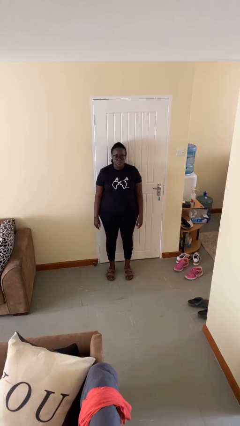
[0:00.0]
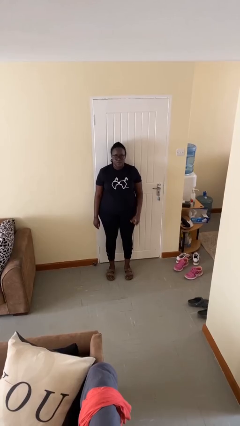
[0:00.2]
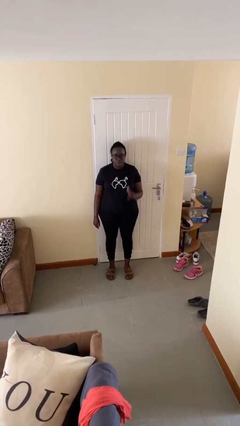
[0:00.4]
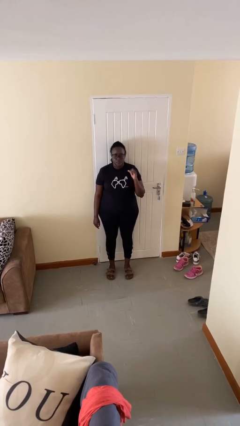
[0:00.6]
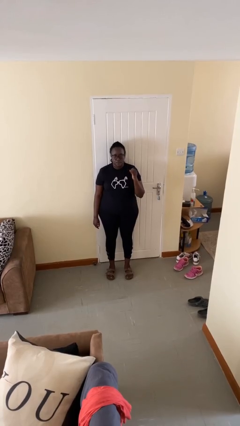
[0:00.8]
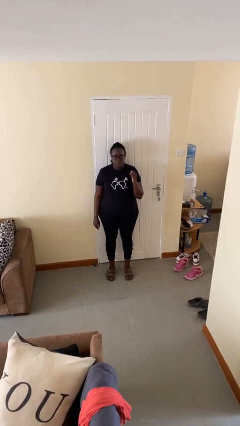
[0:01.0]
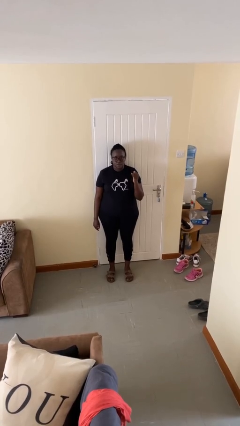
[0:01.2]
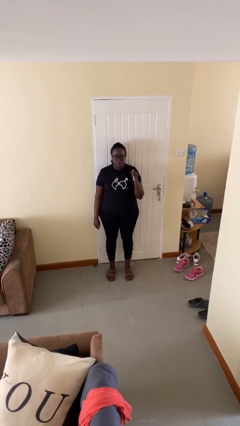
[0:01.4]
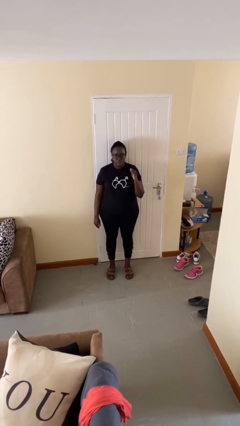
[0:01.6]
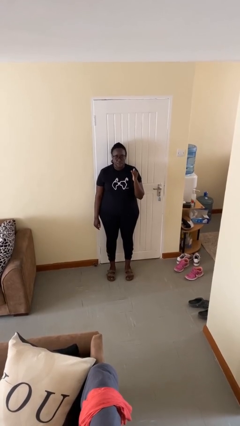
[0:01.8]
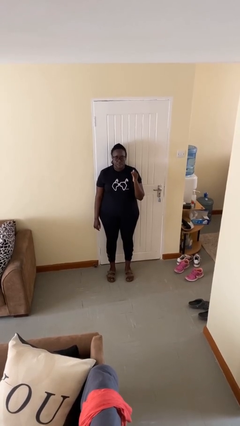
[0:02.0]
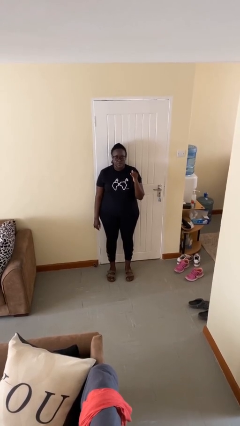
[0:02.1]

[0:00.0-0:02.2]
person gestures hang loose

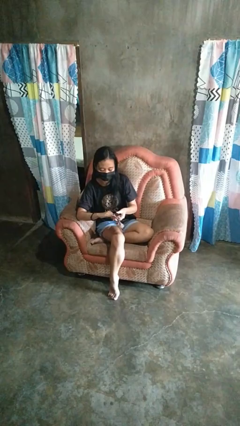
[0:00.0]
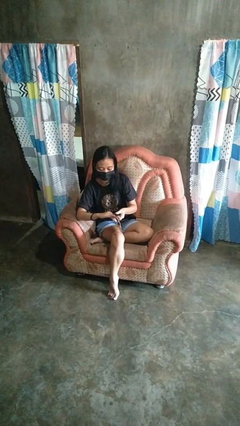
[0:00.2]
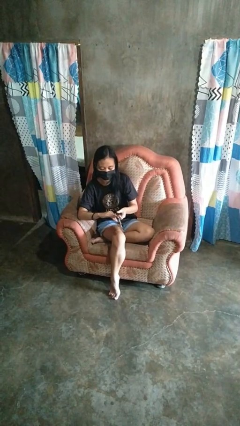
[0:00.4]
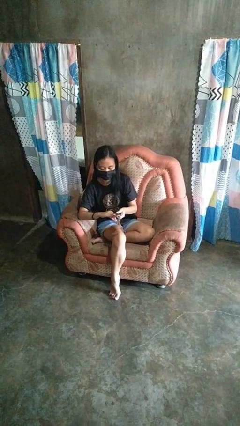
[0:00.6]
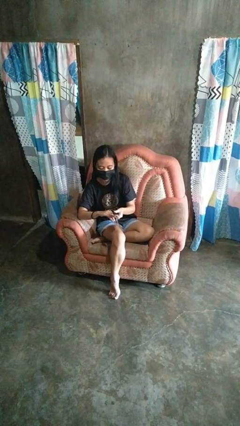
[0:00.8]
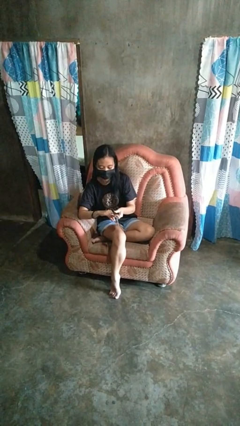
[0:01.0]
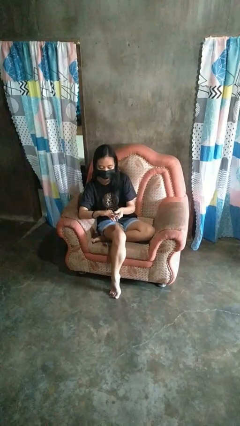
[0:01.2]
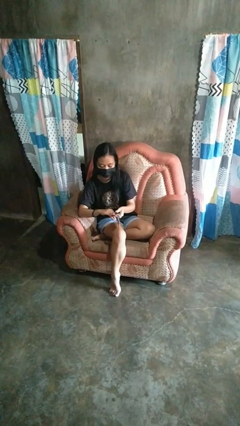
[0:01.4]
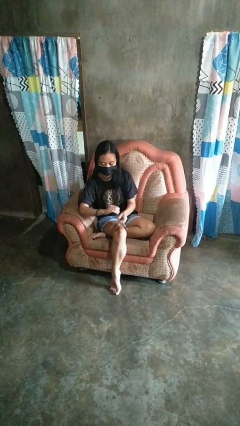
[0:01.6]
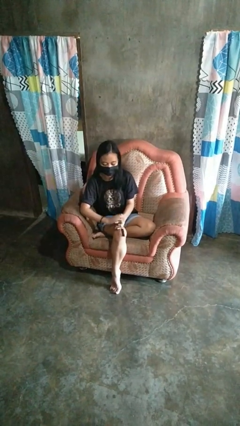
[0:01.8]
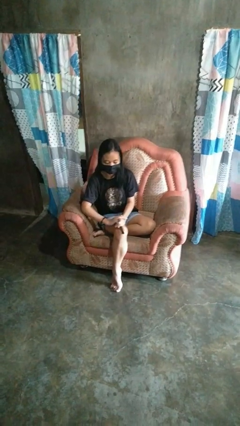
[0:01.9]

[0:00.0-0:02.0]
person clips fingernails

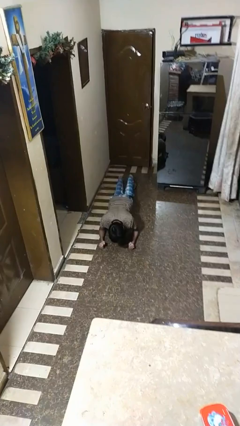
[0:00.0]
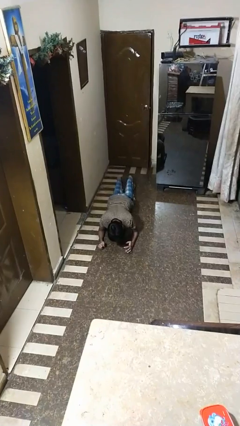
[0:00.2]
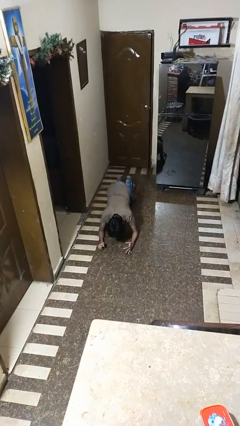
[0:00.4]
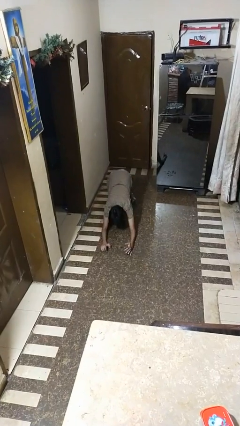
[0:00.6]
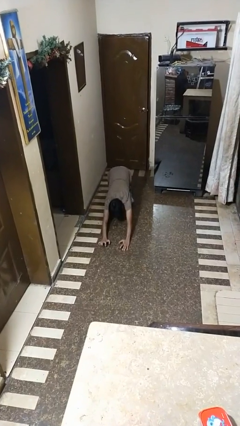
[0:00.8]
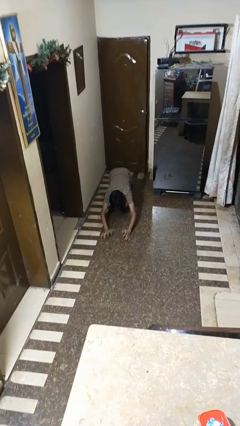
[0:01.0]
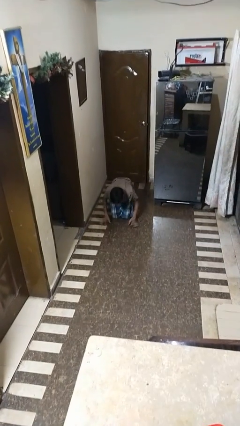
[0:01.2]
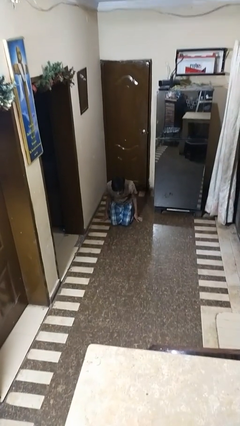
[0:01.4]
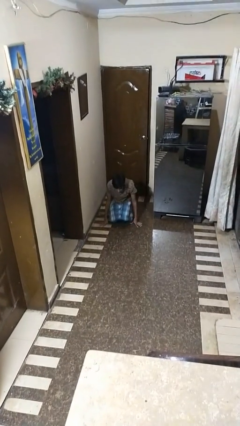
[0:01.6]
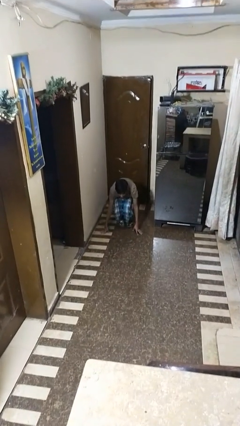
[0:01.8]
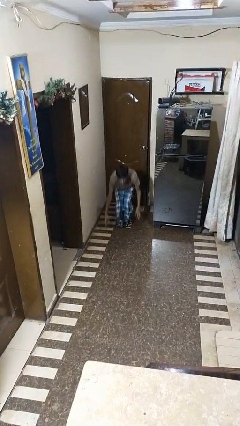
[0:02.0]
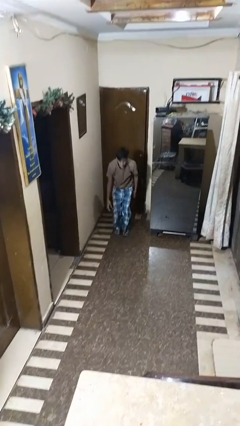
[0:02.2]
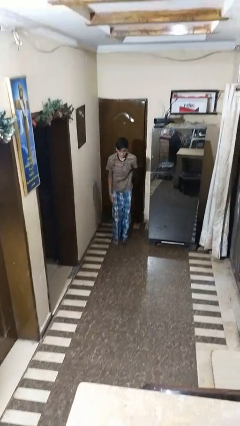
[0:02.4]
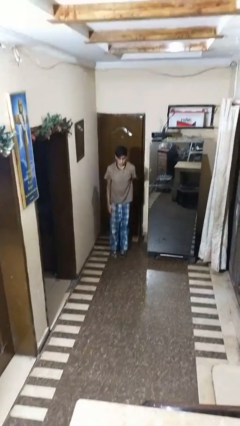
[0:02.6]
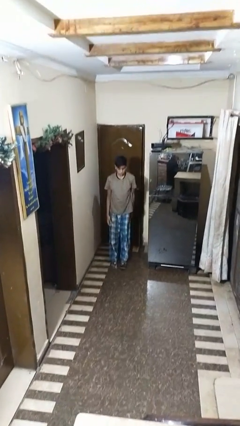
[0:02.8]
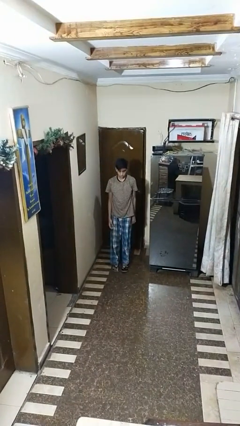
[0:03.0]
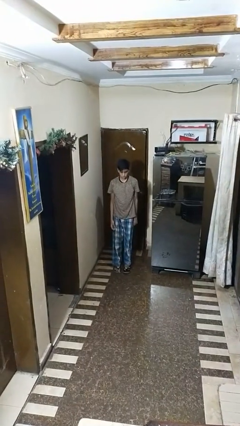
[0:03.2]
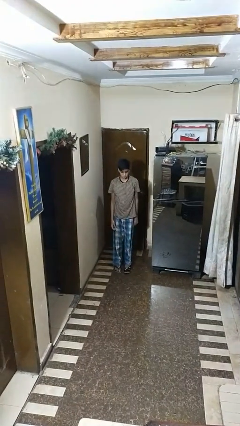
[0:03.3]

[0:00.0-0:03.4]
person stands up from floor

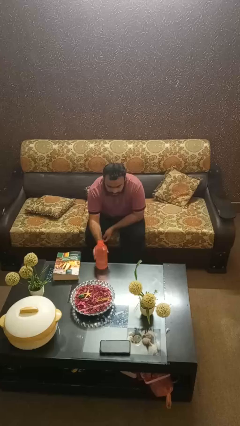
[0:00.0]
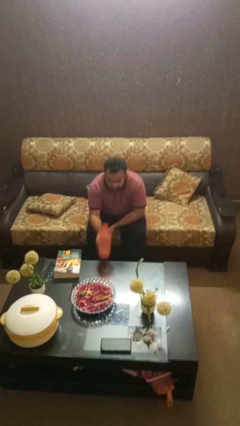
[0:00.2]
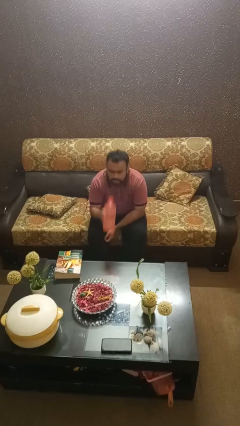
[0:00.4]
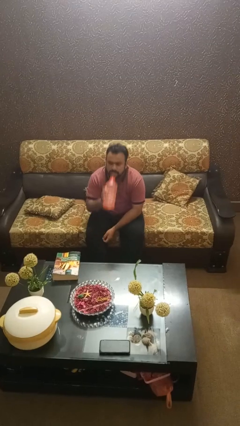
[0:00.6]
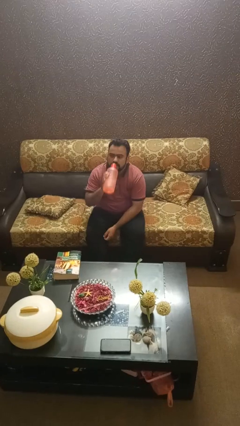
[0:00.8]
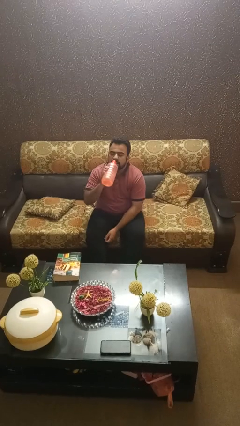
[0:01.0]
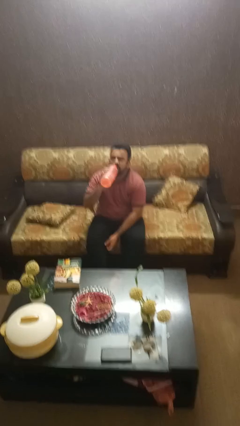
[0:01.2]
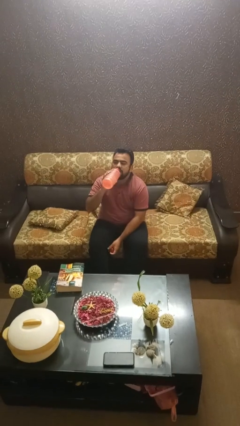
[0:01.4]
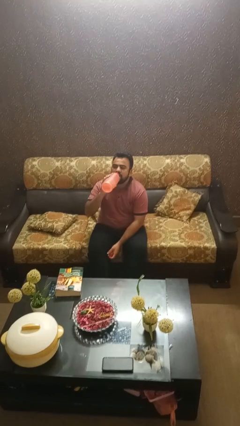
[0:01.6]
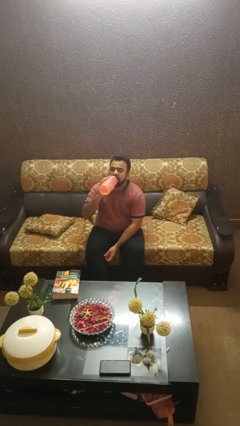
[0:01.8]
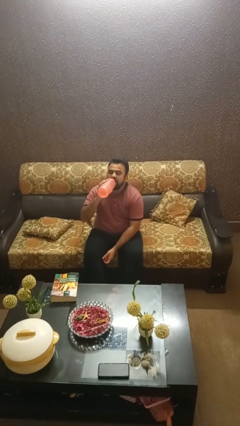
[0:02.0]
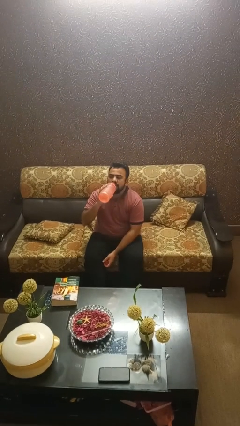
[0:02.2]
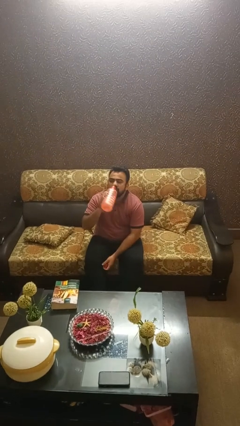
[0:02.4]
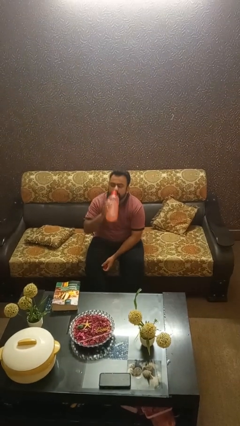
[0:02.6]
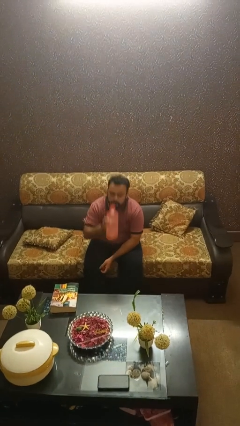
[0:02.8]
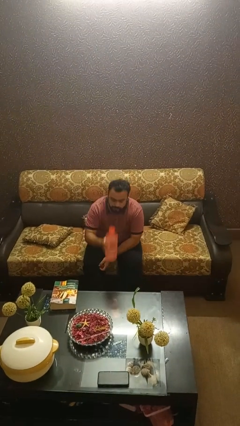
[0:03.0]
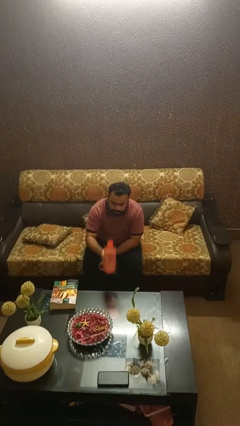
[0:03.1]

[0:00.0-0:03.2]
person drinks from bottle

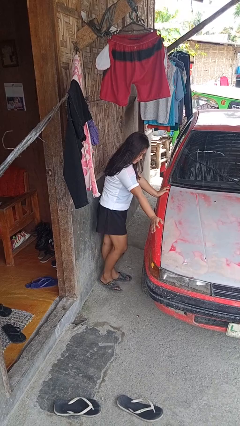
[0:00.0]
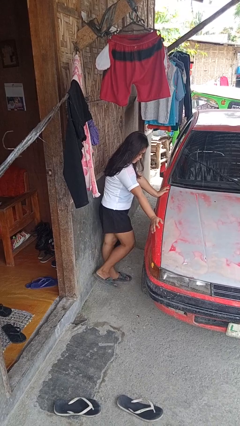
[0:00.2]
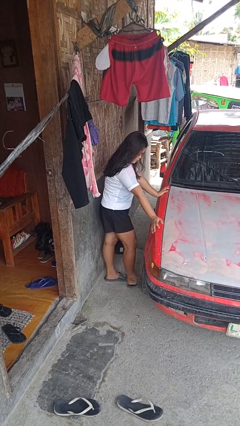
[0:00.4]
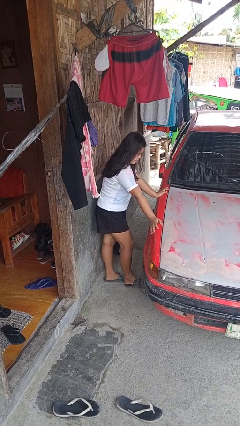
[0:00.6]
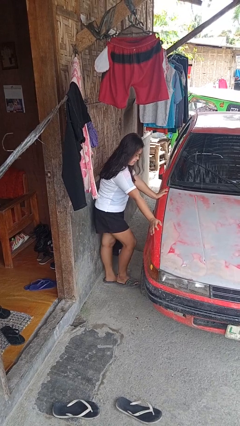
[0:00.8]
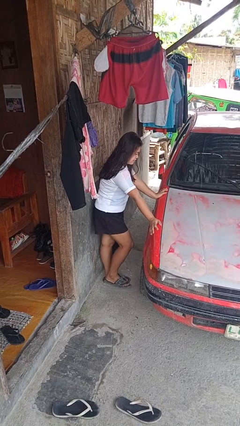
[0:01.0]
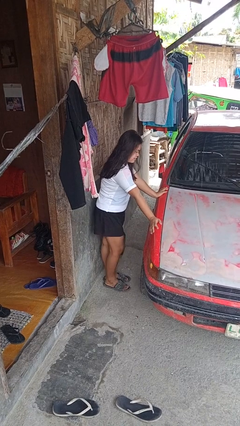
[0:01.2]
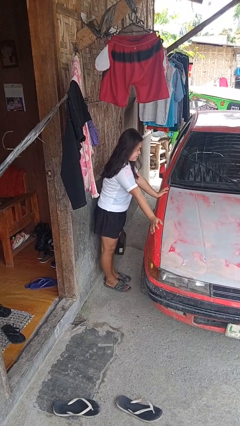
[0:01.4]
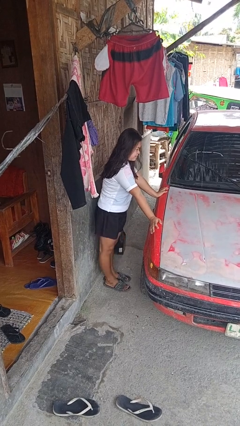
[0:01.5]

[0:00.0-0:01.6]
person kicks car tires

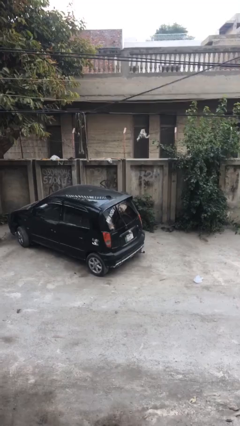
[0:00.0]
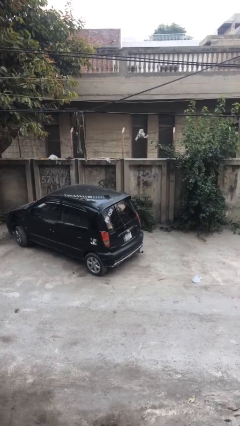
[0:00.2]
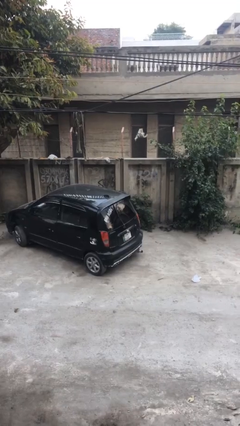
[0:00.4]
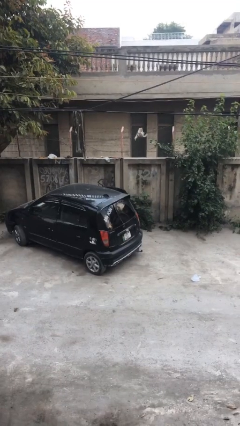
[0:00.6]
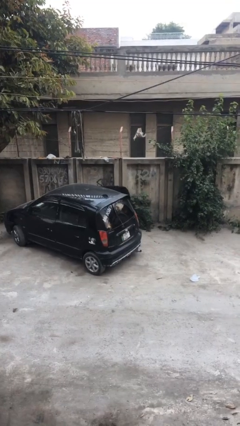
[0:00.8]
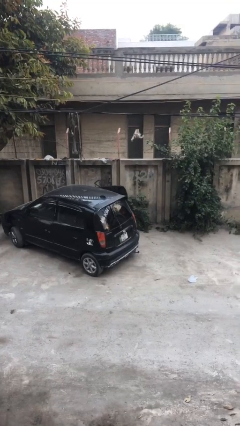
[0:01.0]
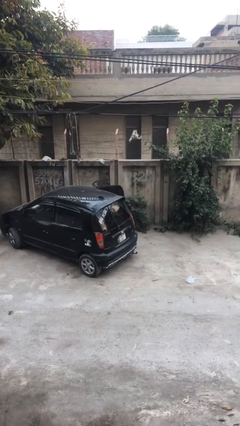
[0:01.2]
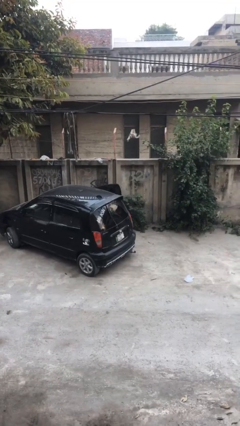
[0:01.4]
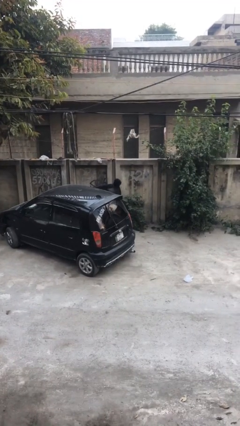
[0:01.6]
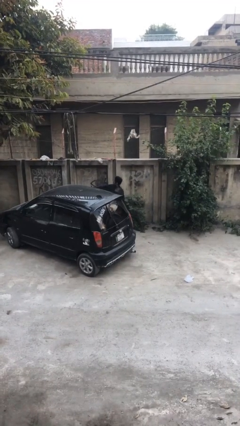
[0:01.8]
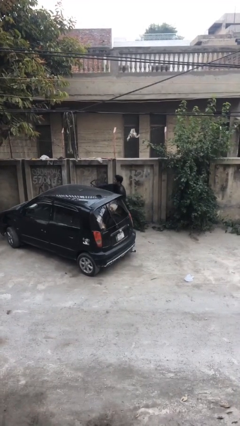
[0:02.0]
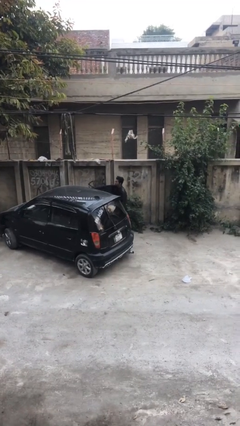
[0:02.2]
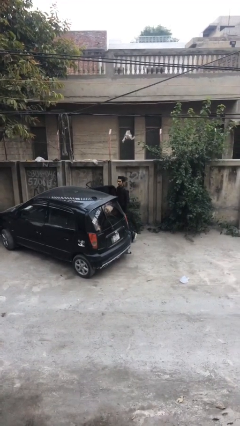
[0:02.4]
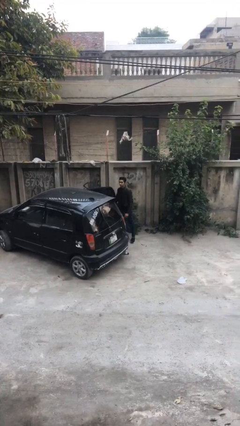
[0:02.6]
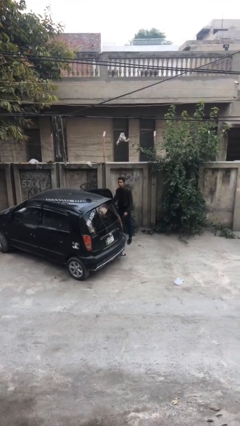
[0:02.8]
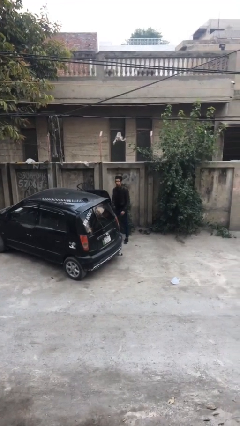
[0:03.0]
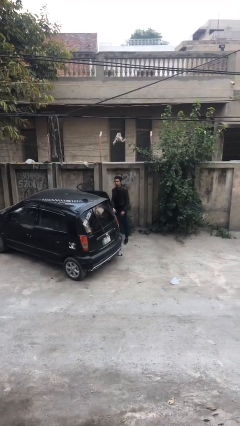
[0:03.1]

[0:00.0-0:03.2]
person exits car

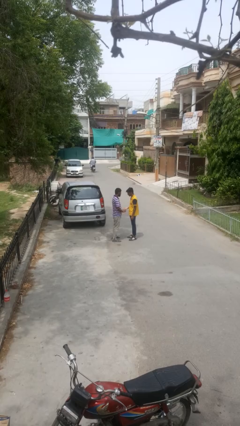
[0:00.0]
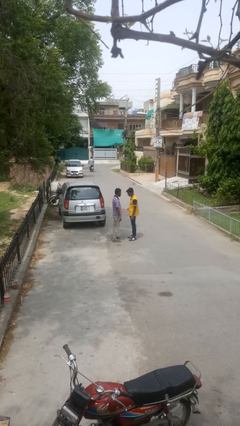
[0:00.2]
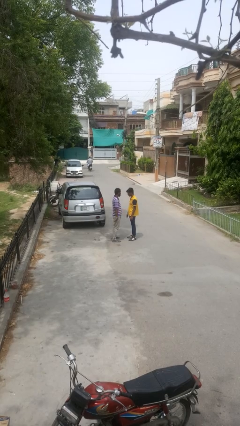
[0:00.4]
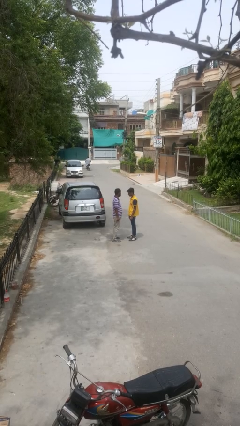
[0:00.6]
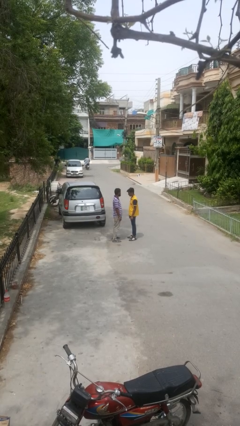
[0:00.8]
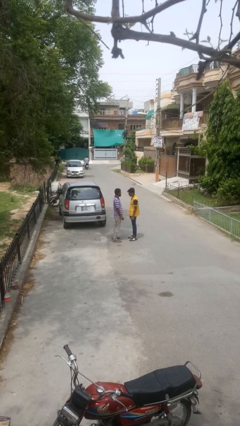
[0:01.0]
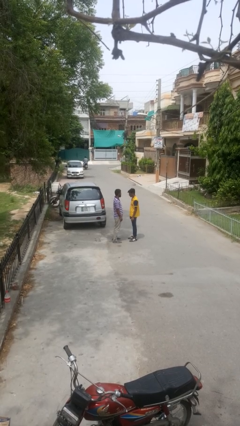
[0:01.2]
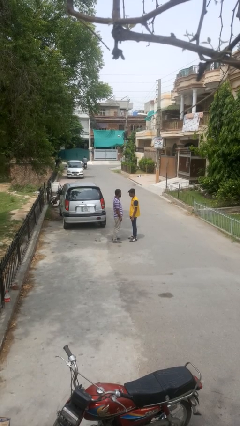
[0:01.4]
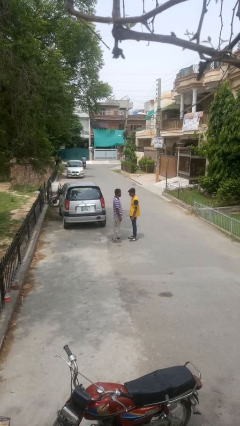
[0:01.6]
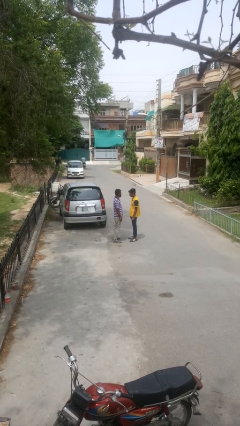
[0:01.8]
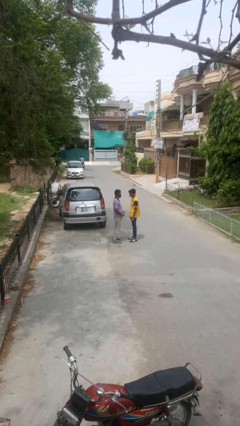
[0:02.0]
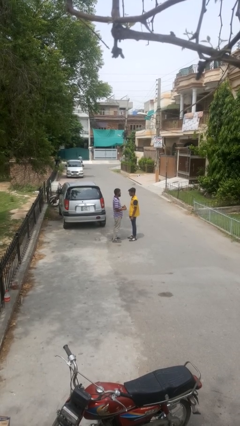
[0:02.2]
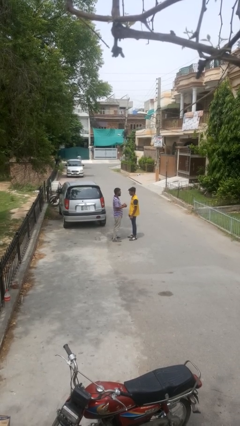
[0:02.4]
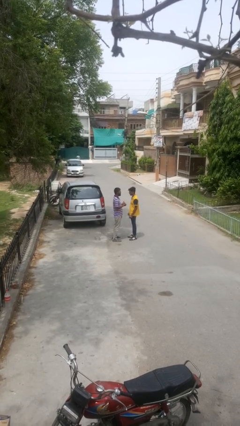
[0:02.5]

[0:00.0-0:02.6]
person highfives hand
